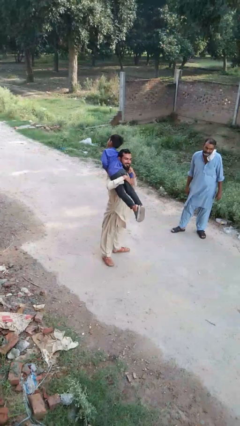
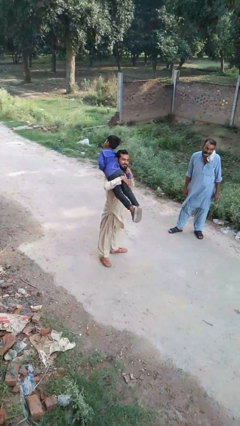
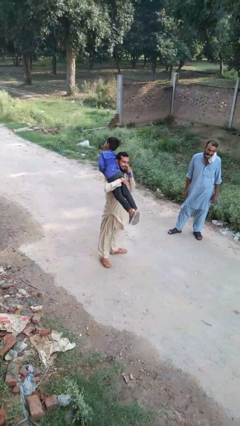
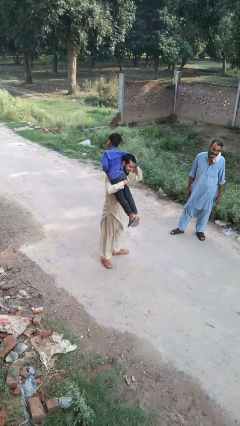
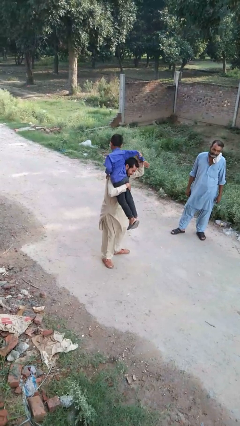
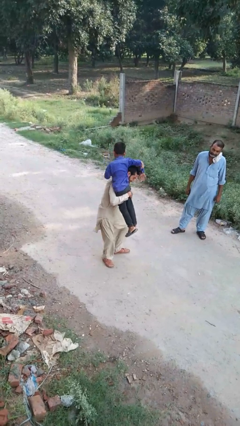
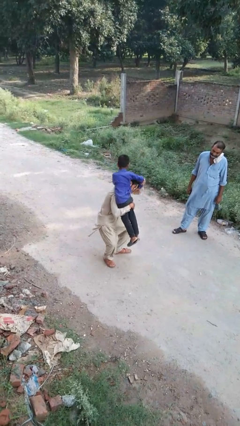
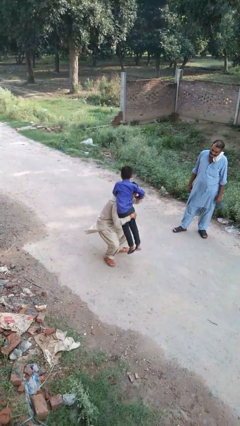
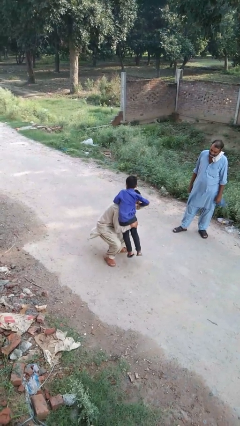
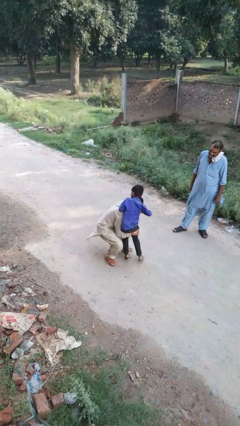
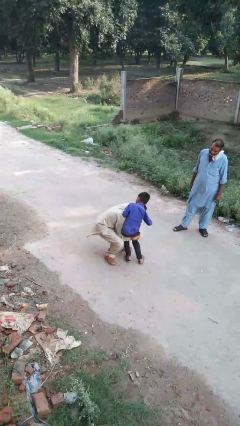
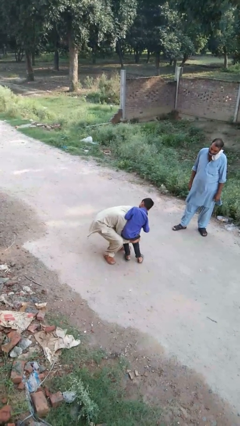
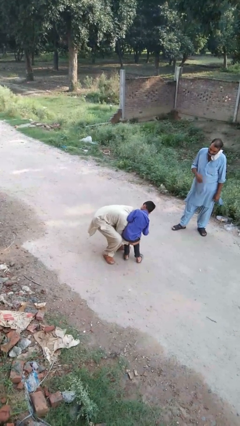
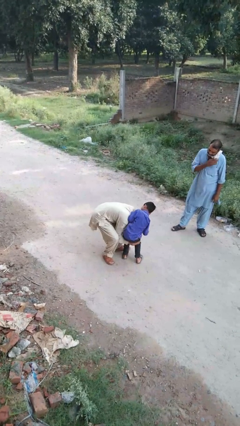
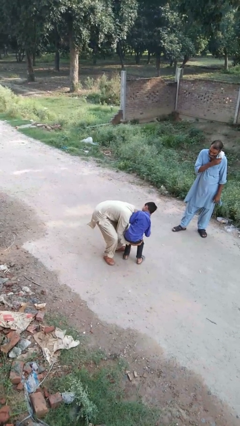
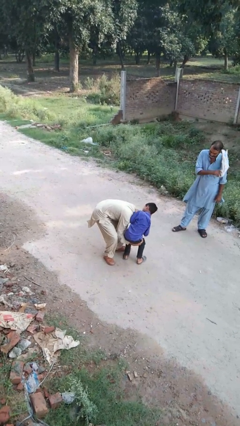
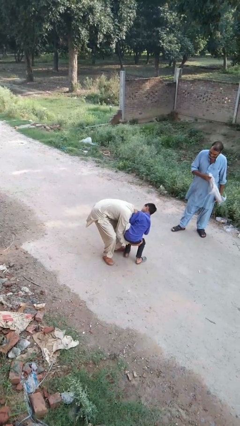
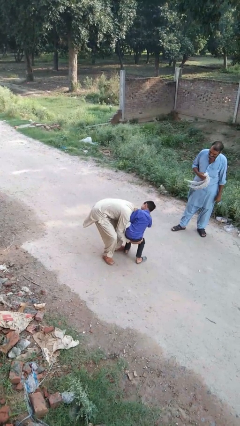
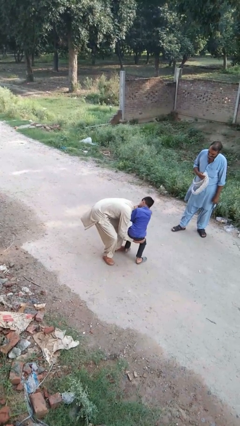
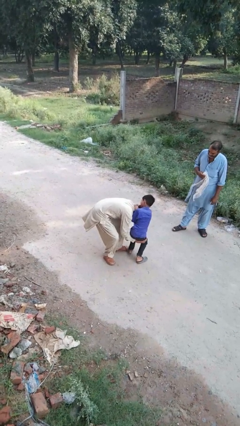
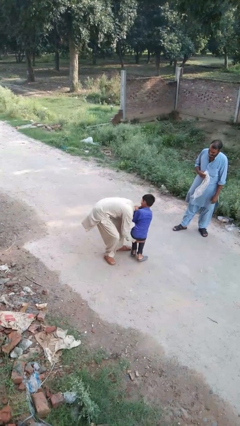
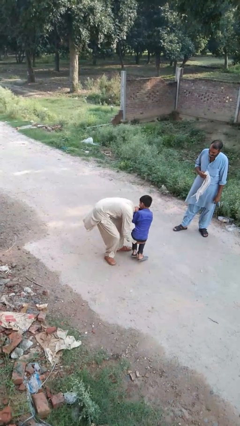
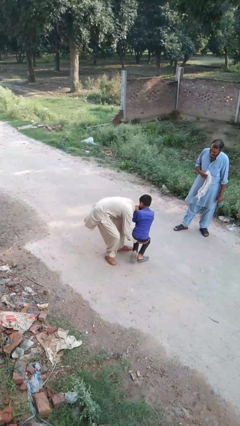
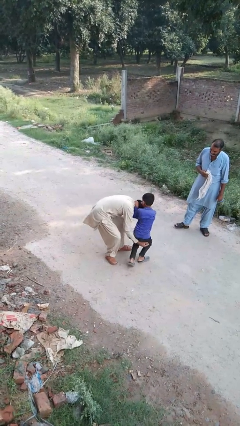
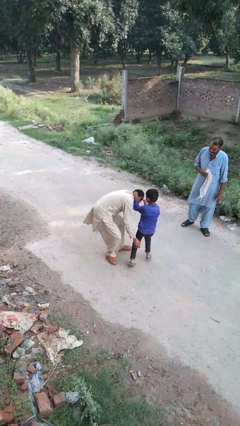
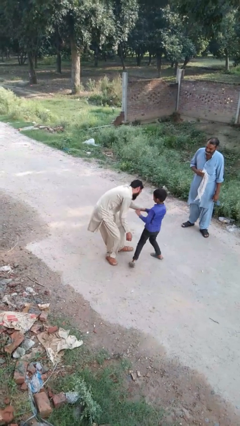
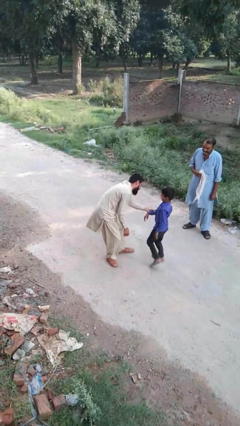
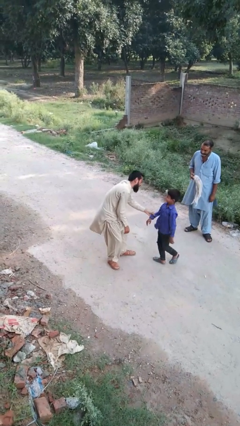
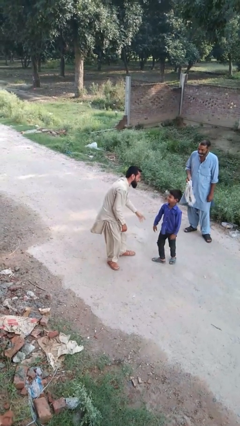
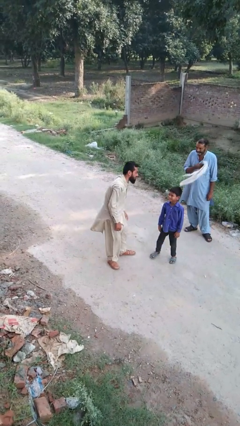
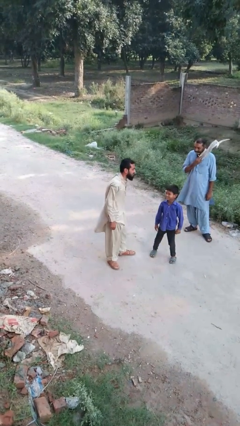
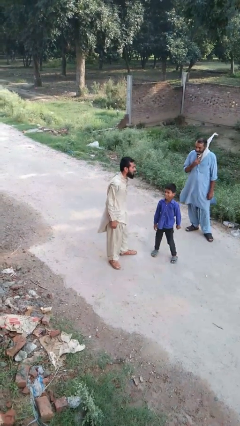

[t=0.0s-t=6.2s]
person puts down person

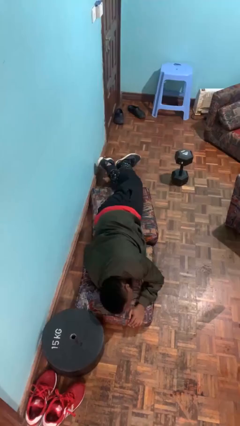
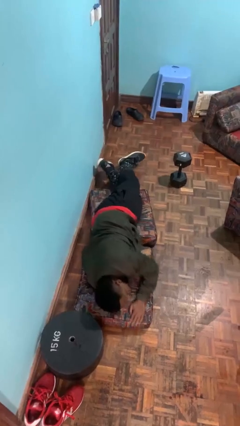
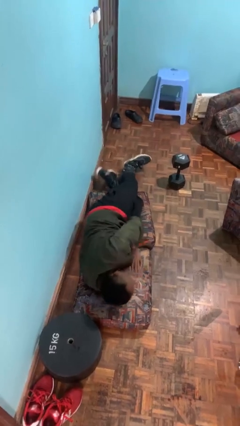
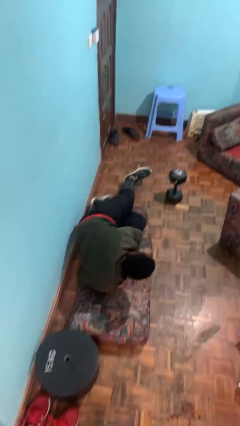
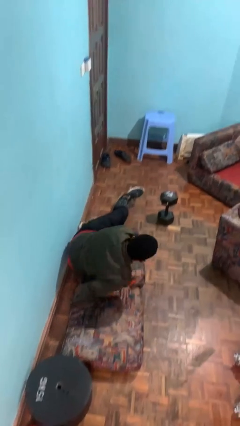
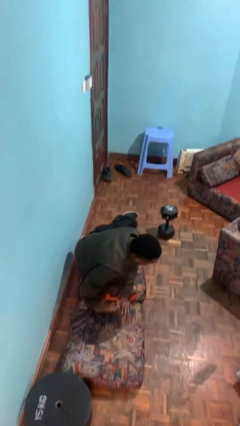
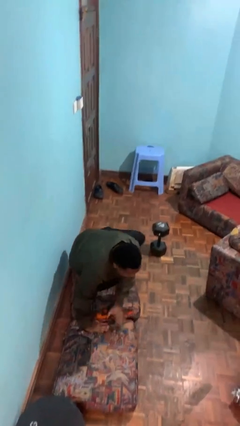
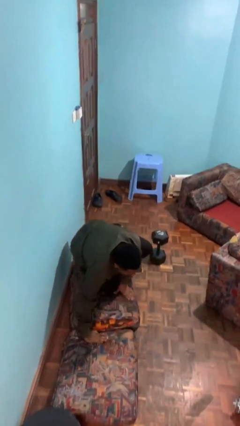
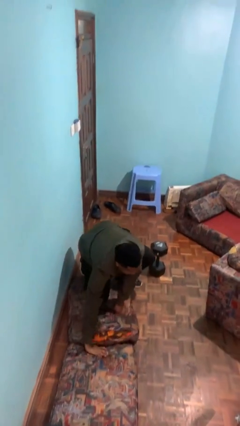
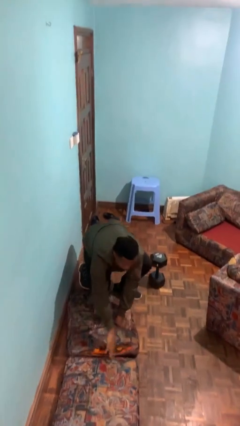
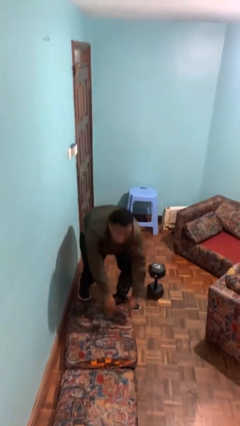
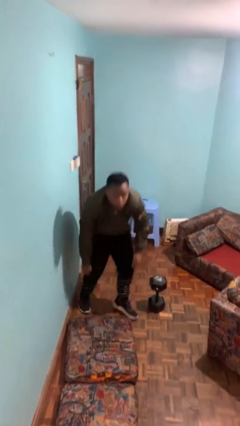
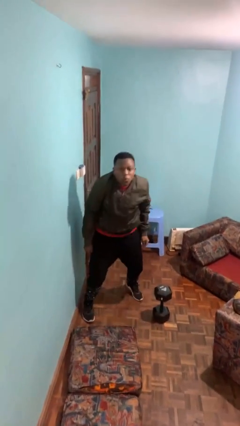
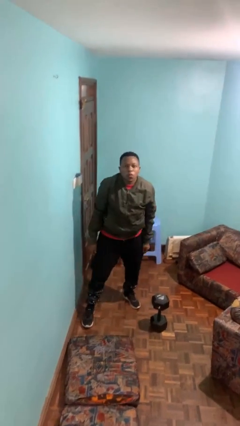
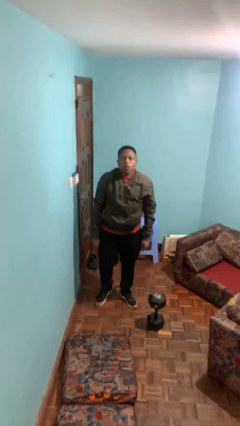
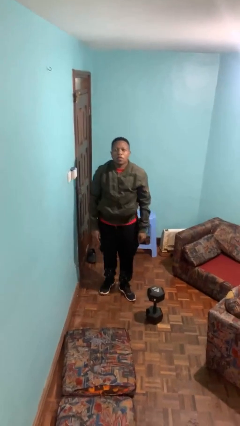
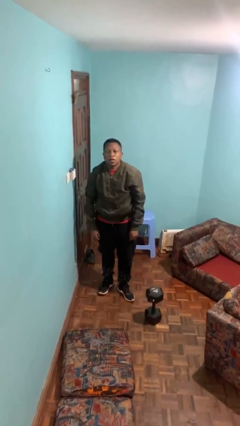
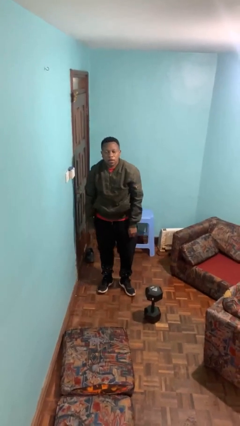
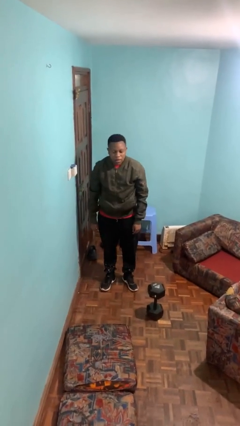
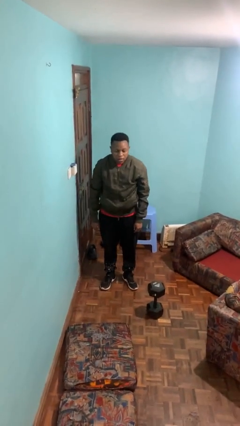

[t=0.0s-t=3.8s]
person stands up from floor

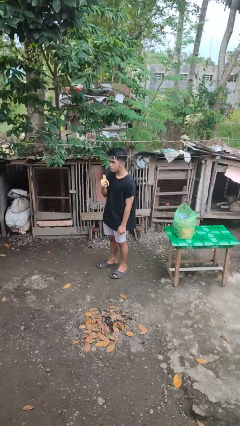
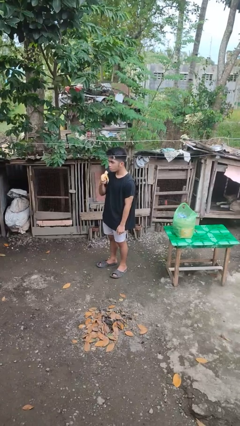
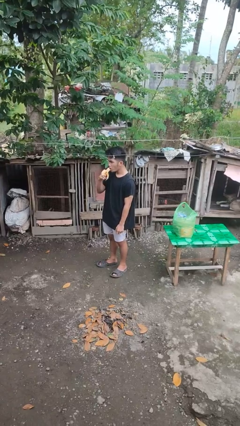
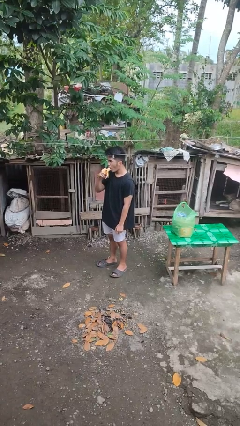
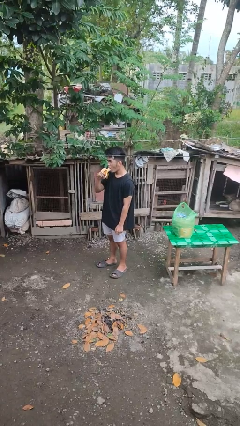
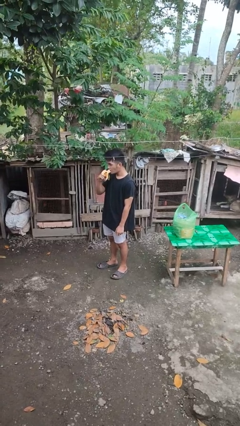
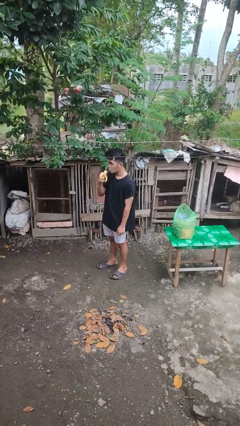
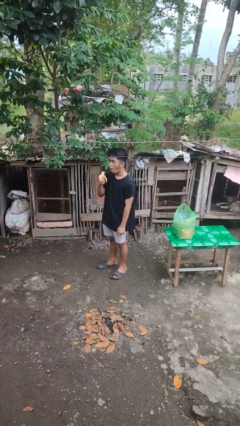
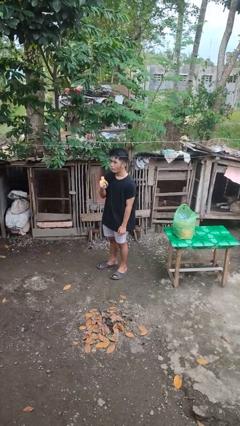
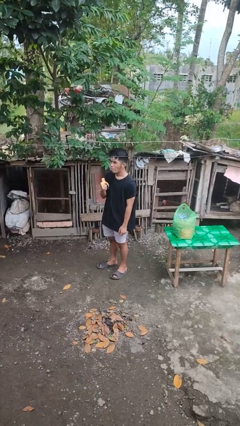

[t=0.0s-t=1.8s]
person eats banana

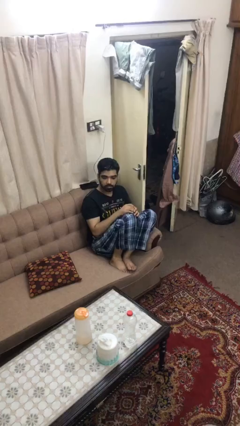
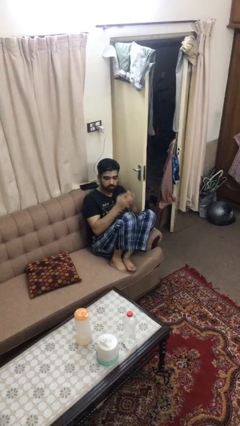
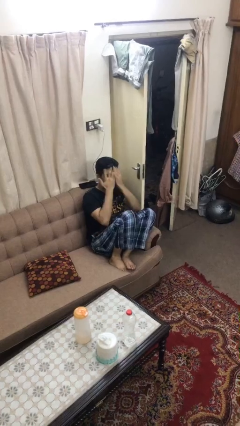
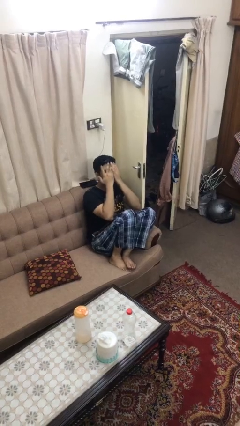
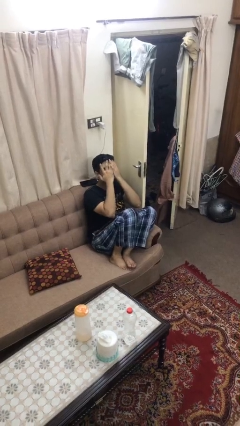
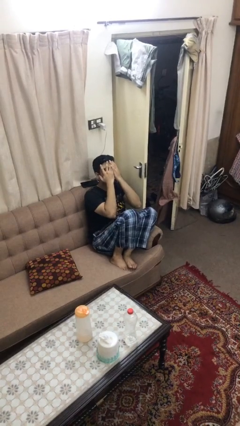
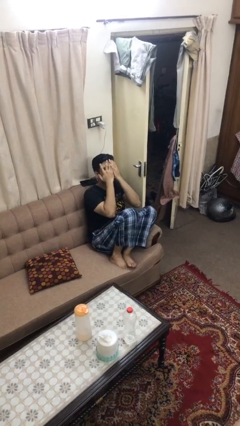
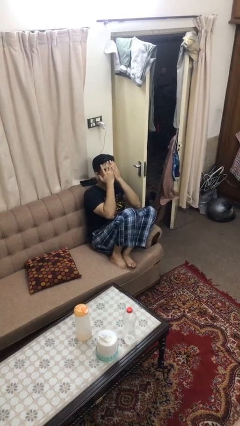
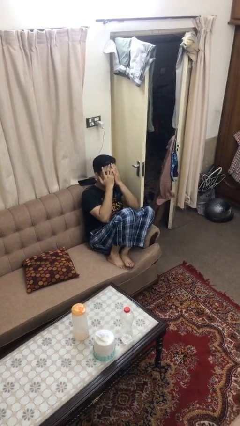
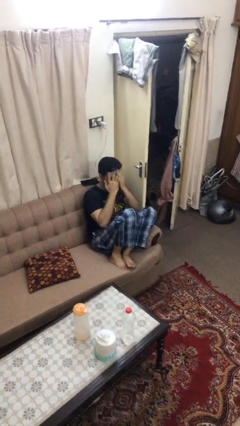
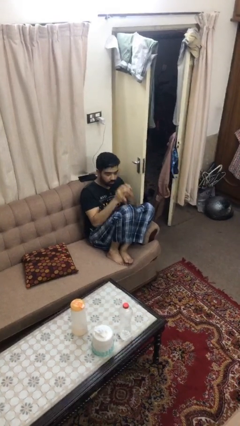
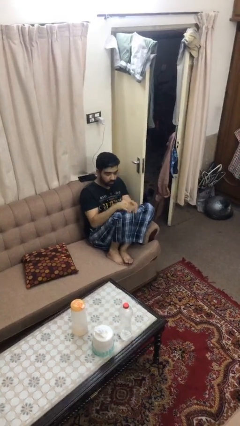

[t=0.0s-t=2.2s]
person covers face with hands

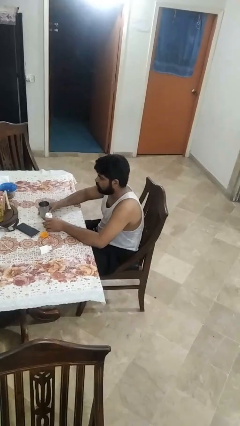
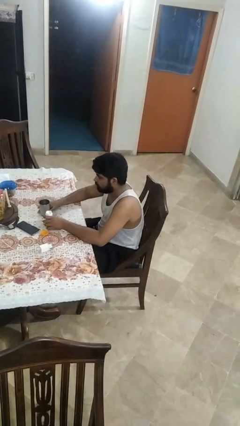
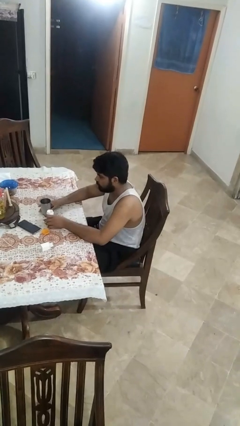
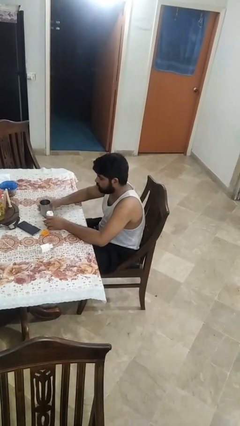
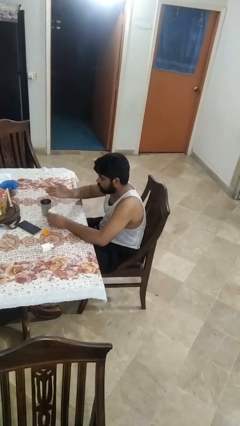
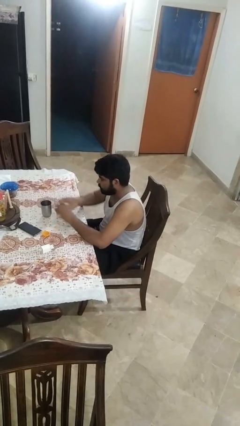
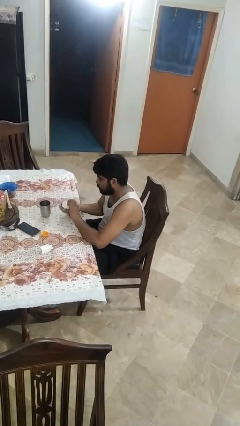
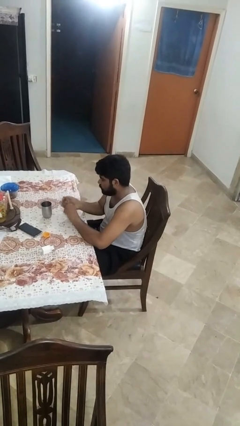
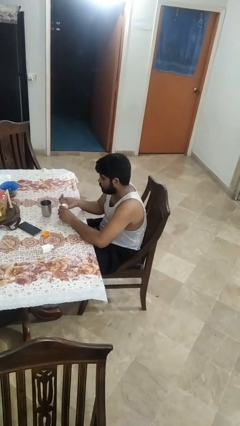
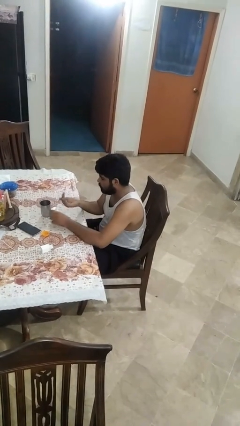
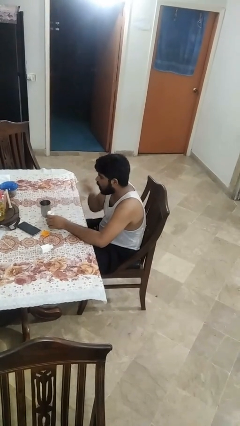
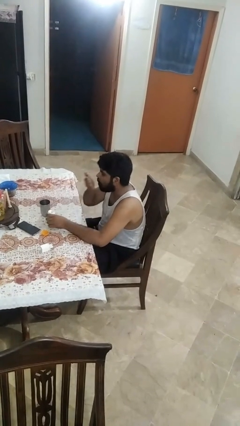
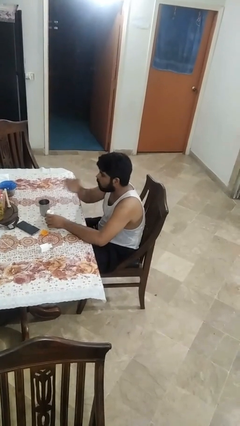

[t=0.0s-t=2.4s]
person takes medicine pills

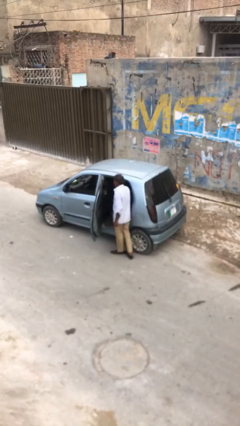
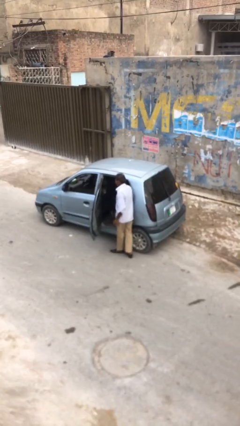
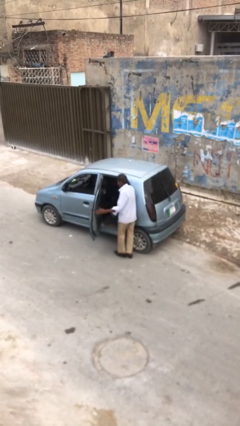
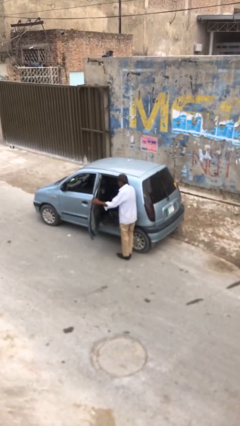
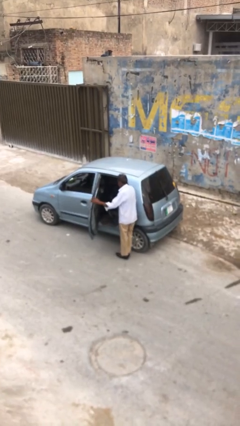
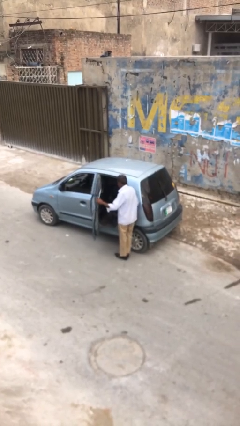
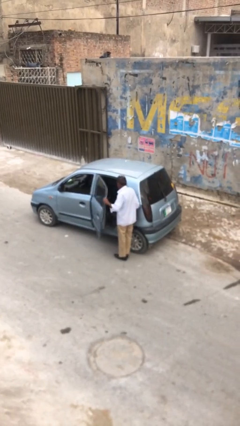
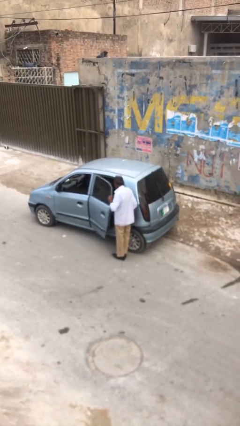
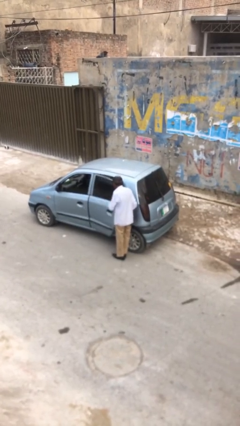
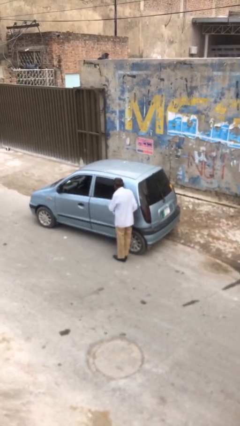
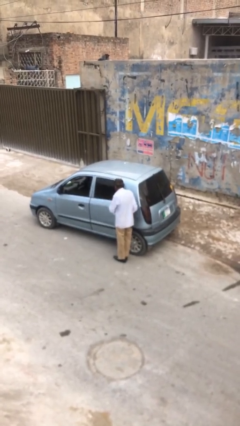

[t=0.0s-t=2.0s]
person closes car door
